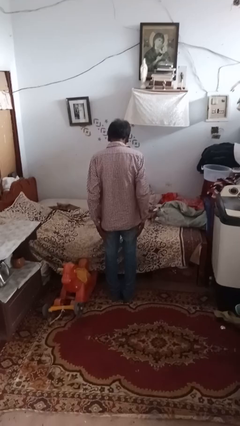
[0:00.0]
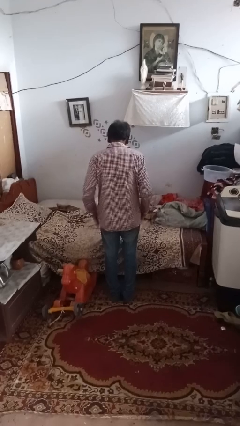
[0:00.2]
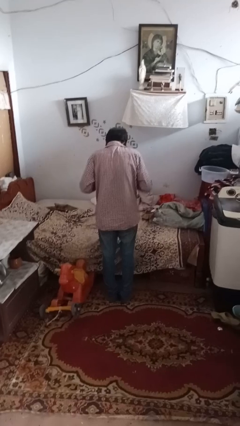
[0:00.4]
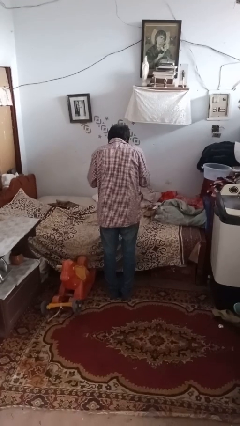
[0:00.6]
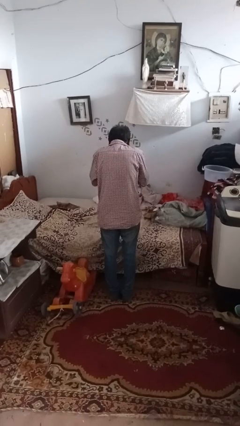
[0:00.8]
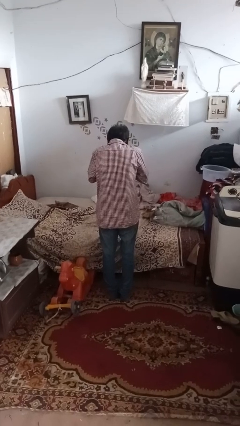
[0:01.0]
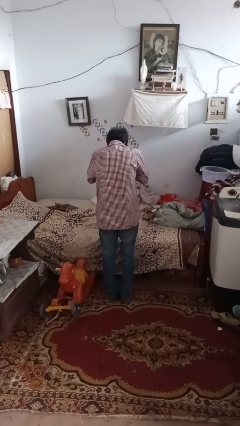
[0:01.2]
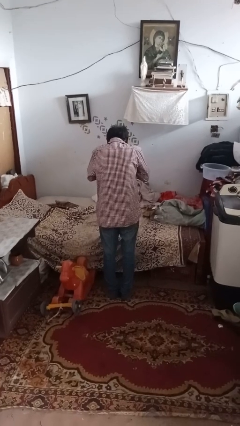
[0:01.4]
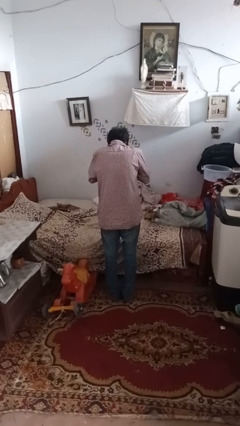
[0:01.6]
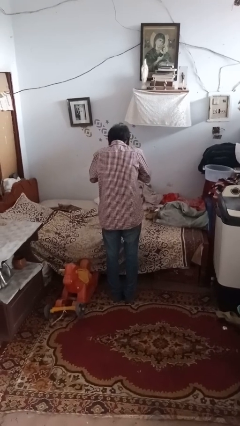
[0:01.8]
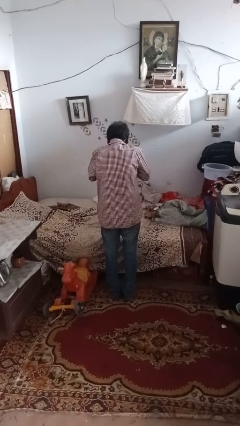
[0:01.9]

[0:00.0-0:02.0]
person sneezes into hand

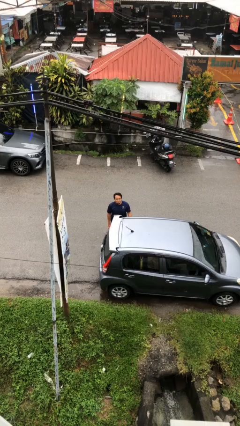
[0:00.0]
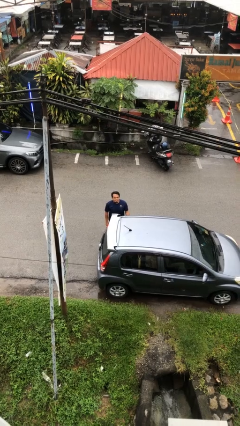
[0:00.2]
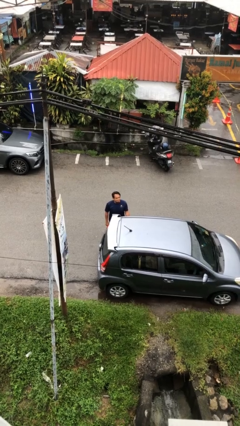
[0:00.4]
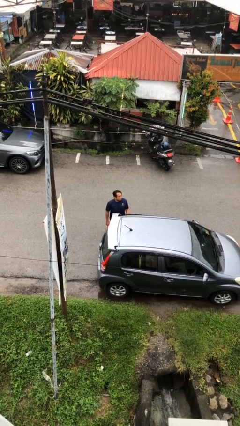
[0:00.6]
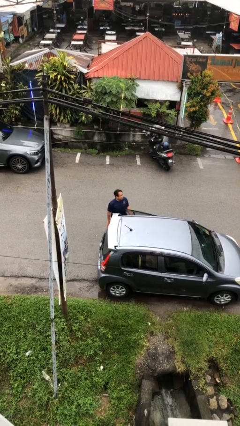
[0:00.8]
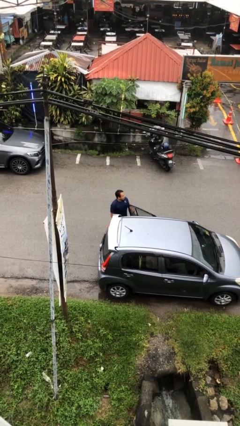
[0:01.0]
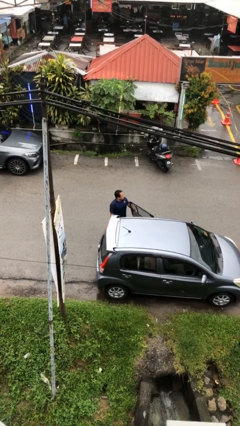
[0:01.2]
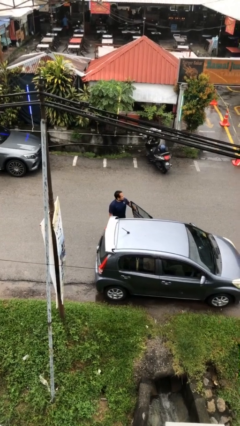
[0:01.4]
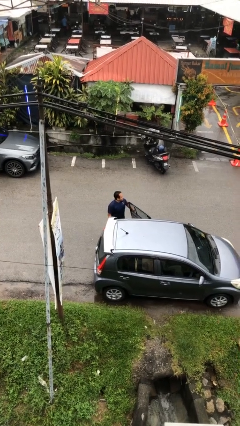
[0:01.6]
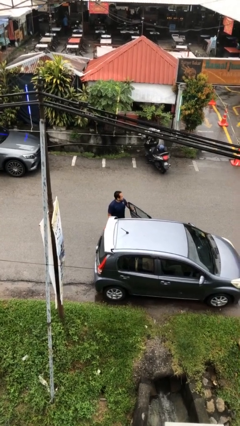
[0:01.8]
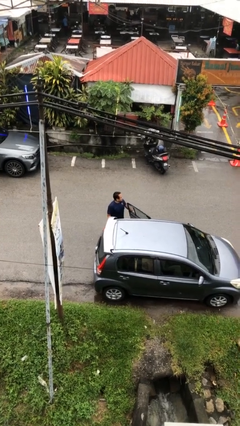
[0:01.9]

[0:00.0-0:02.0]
person opens car door

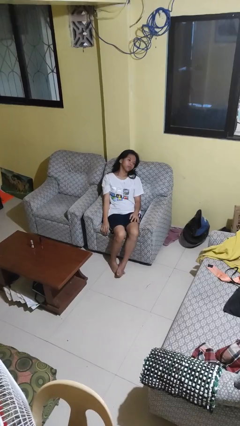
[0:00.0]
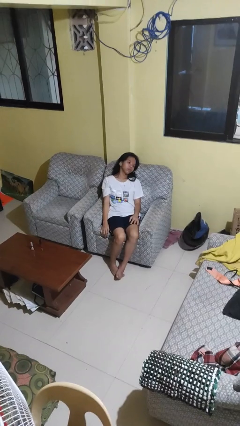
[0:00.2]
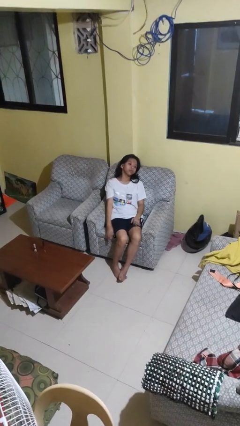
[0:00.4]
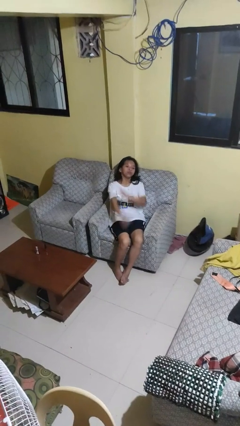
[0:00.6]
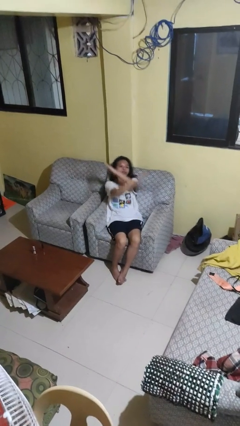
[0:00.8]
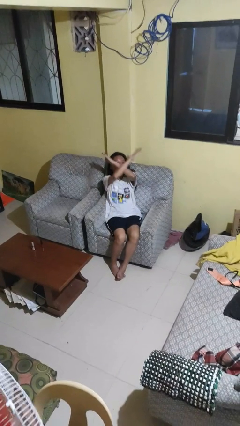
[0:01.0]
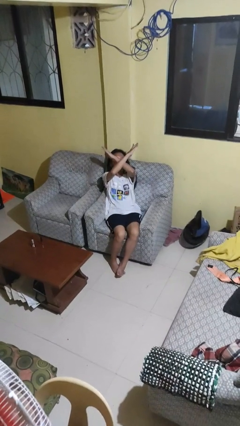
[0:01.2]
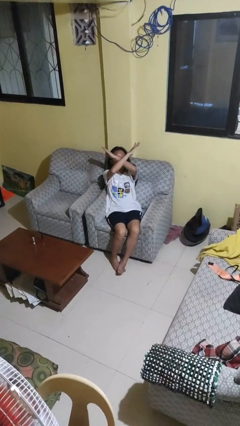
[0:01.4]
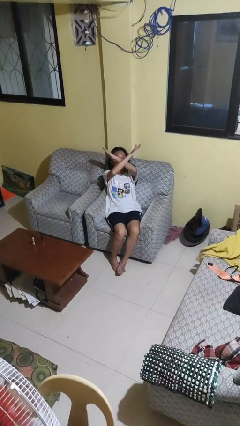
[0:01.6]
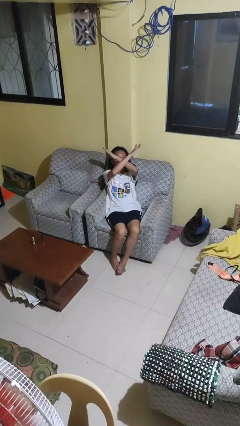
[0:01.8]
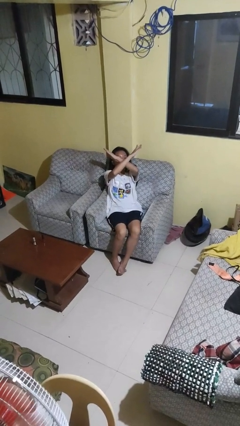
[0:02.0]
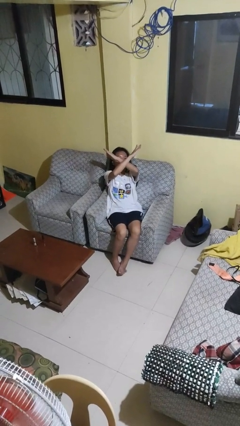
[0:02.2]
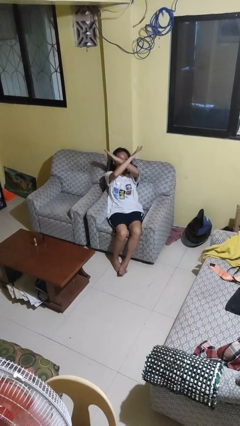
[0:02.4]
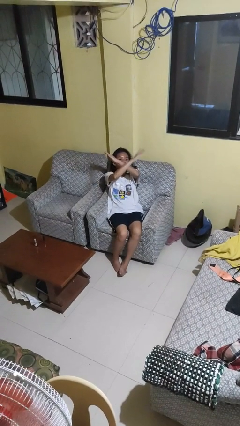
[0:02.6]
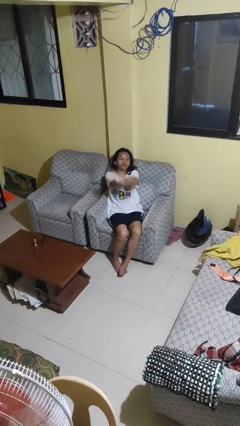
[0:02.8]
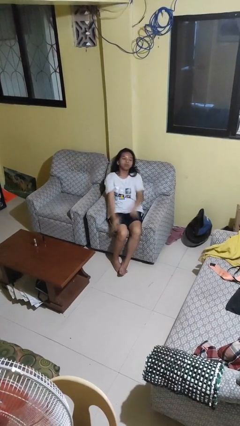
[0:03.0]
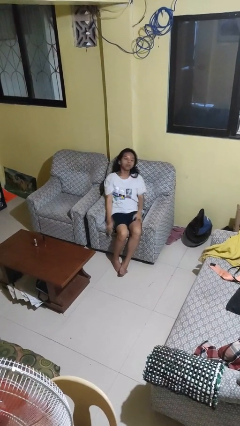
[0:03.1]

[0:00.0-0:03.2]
person gestures arms x

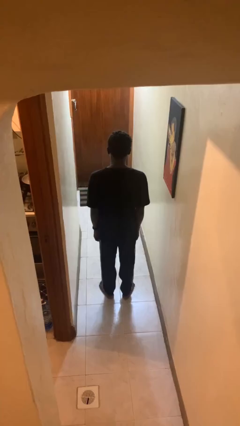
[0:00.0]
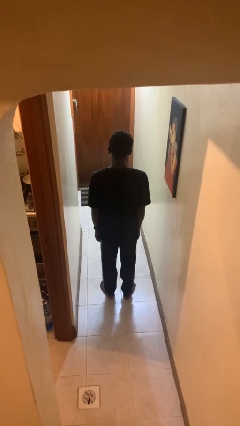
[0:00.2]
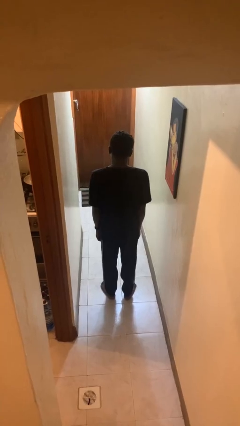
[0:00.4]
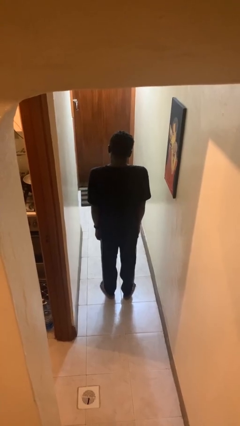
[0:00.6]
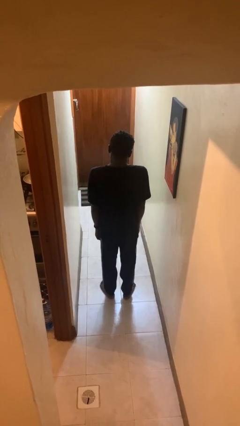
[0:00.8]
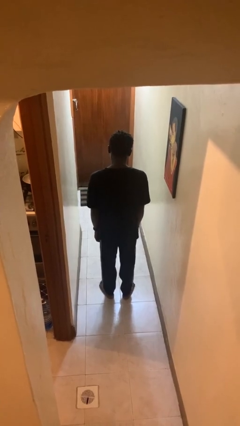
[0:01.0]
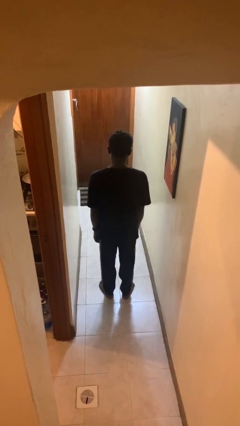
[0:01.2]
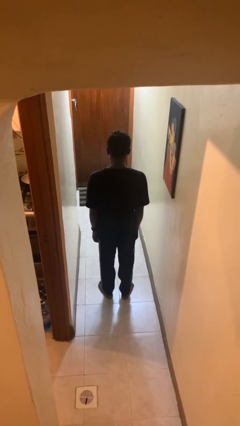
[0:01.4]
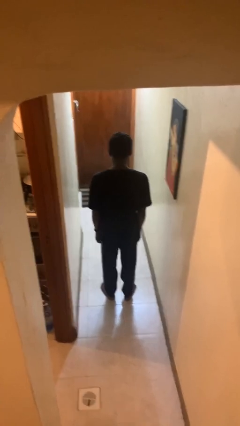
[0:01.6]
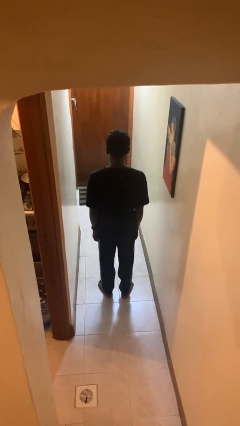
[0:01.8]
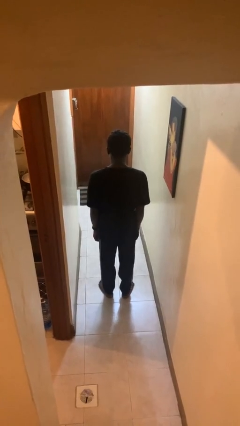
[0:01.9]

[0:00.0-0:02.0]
person shrugs

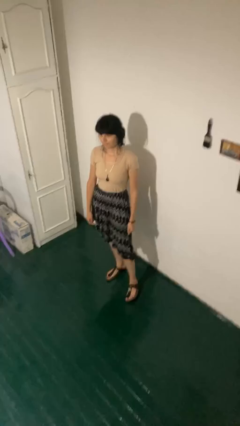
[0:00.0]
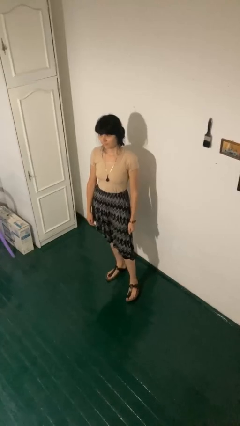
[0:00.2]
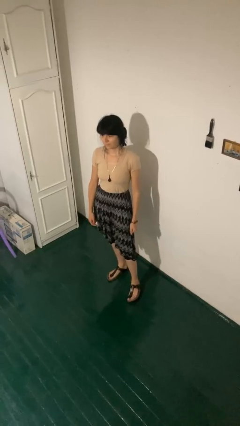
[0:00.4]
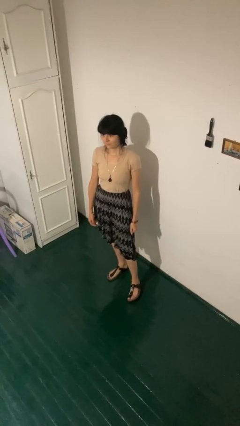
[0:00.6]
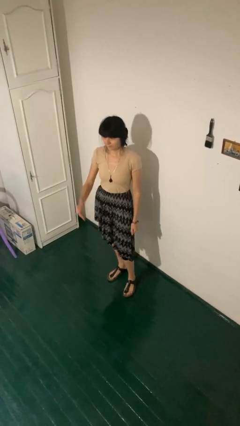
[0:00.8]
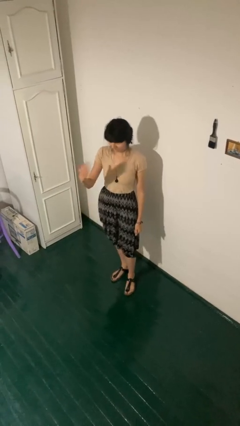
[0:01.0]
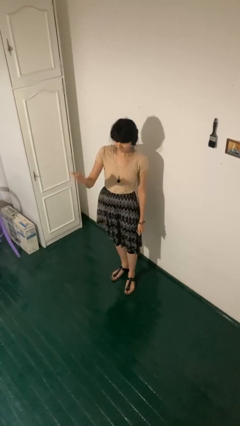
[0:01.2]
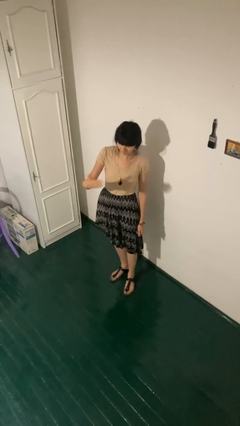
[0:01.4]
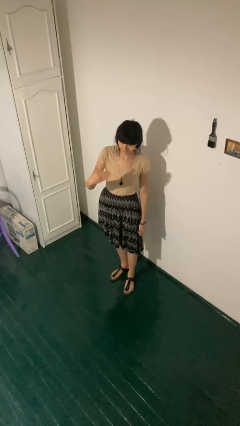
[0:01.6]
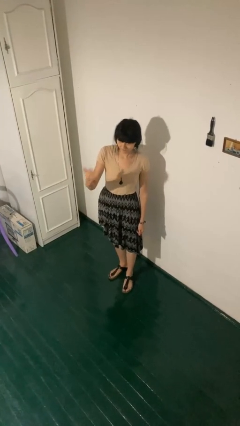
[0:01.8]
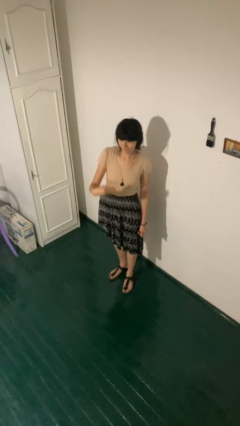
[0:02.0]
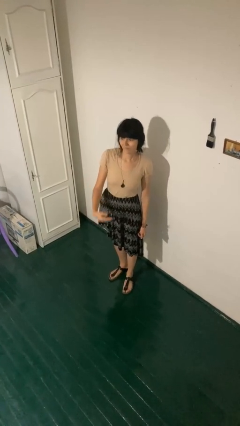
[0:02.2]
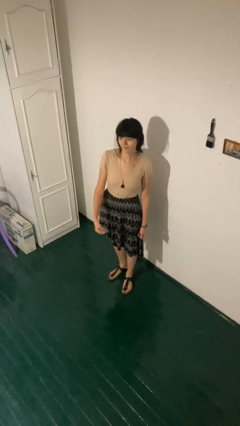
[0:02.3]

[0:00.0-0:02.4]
person gestures come here

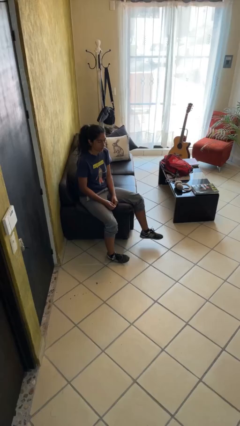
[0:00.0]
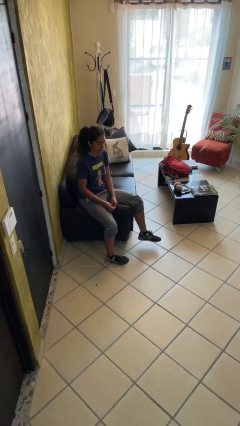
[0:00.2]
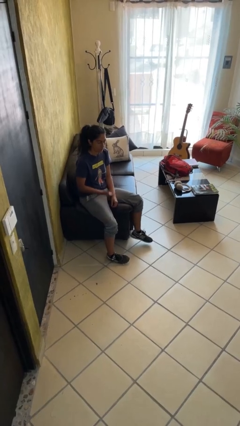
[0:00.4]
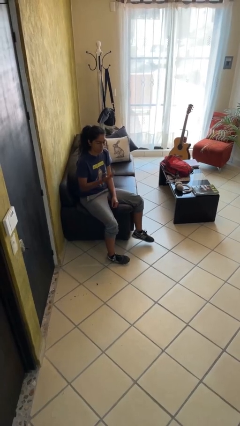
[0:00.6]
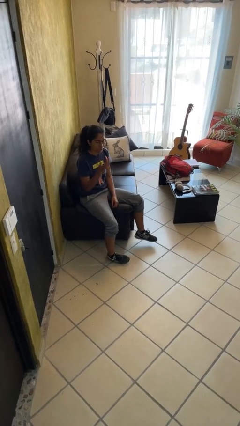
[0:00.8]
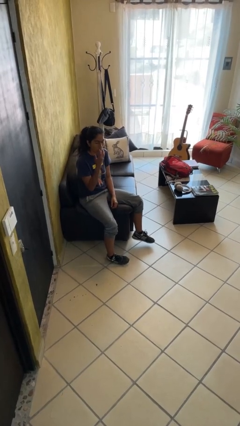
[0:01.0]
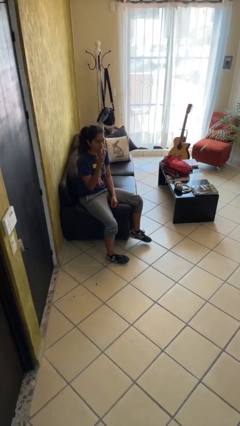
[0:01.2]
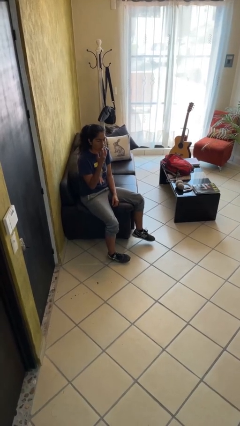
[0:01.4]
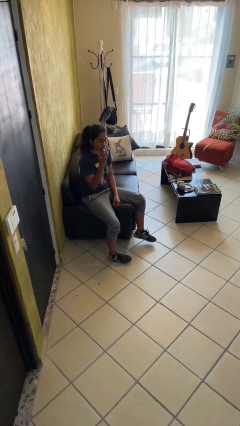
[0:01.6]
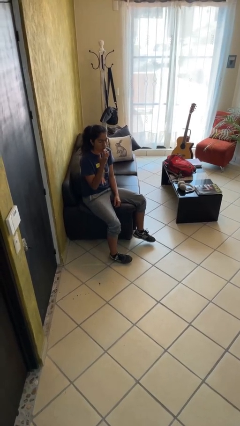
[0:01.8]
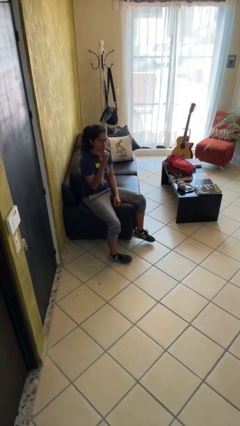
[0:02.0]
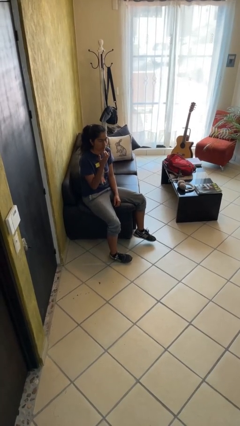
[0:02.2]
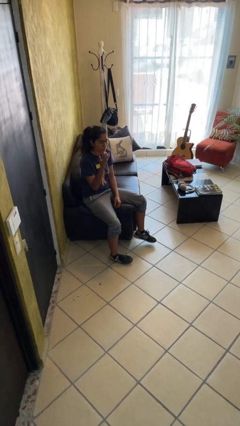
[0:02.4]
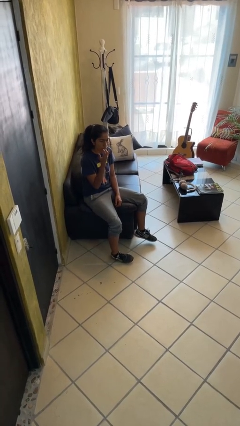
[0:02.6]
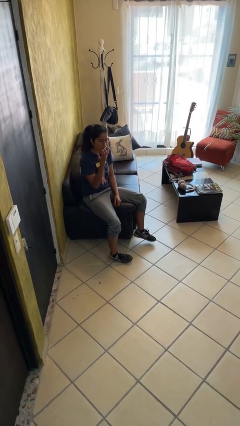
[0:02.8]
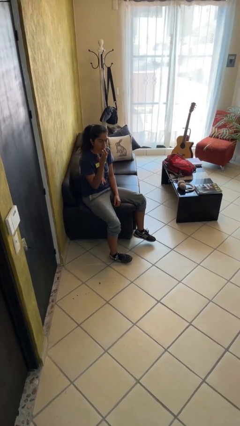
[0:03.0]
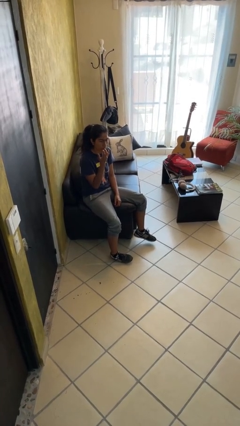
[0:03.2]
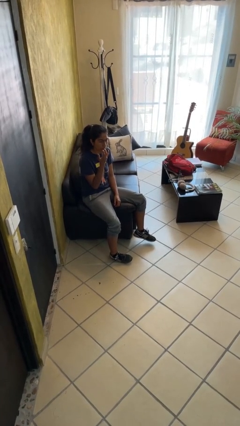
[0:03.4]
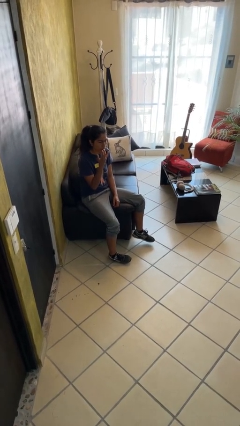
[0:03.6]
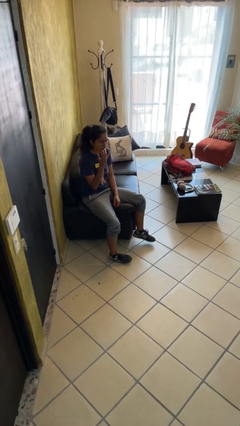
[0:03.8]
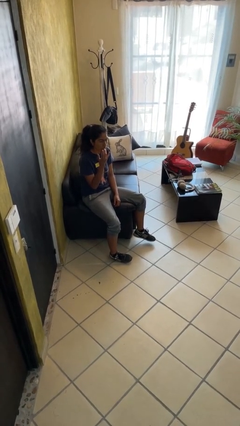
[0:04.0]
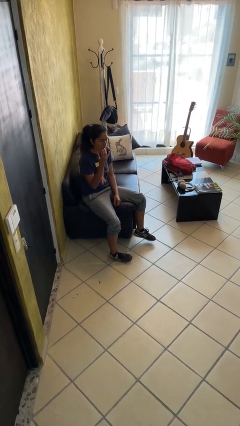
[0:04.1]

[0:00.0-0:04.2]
person licks fingers

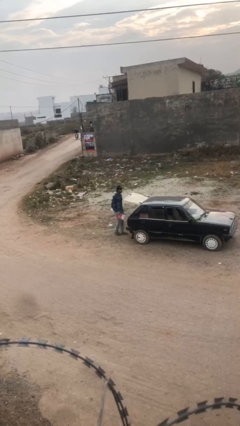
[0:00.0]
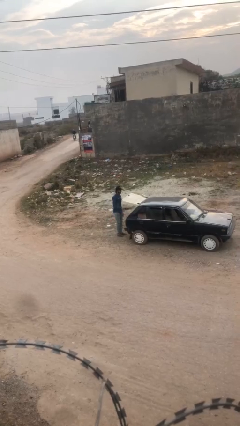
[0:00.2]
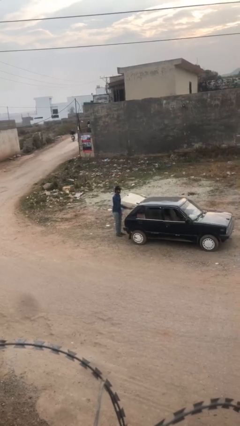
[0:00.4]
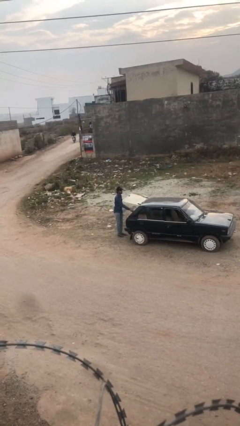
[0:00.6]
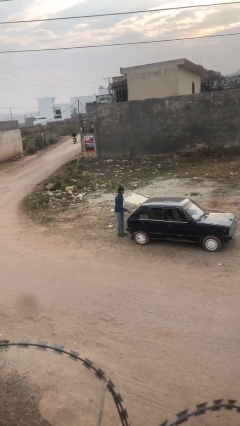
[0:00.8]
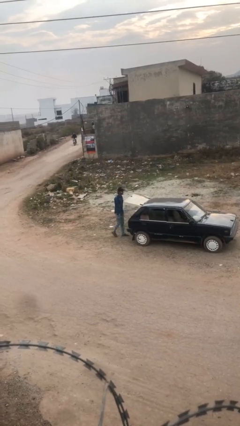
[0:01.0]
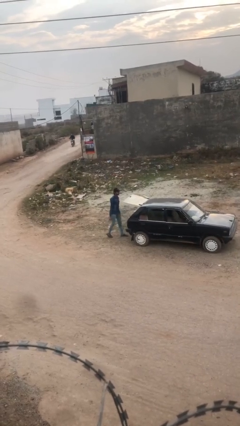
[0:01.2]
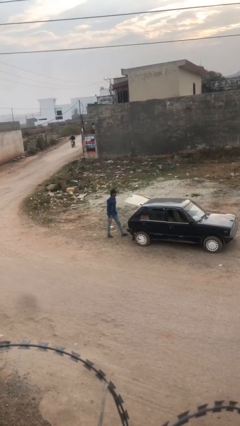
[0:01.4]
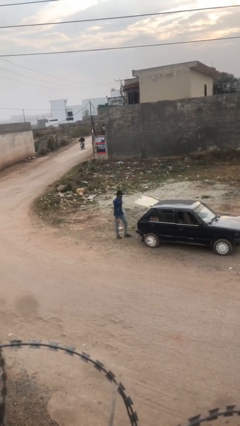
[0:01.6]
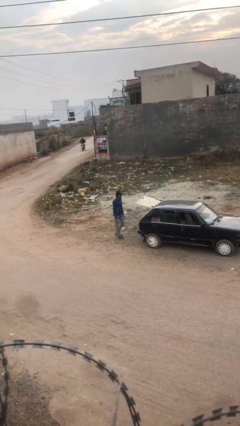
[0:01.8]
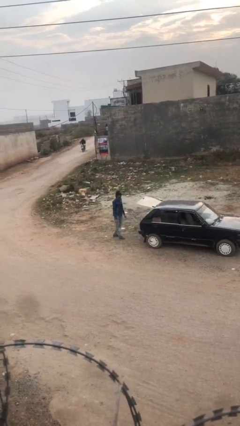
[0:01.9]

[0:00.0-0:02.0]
person loads car
